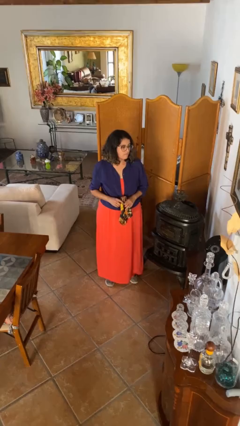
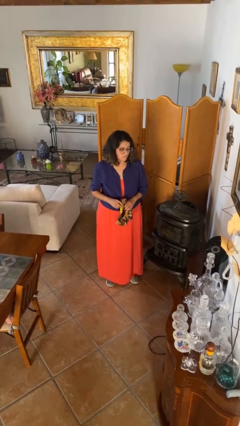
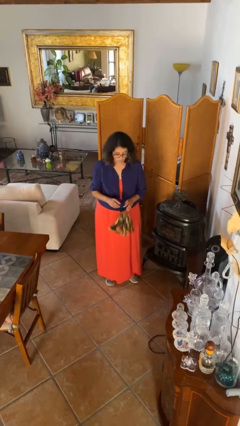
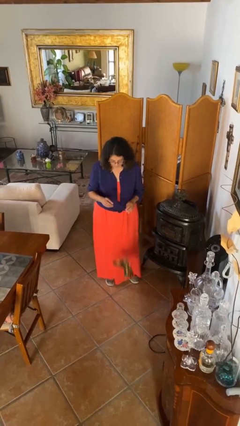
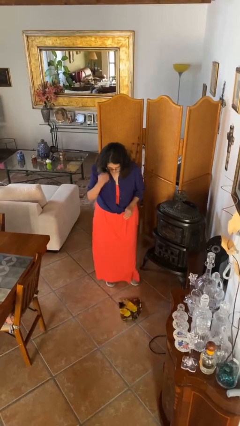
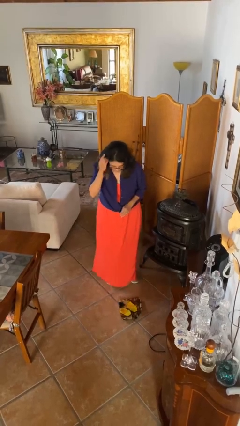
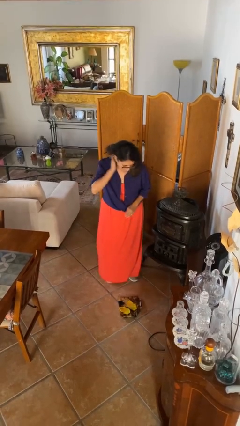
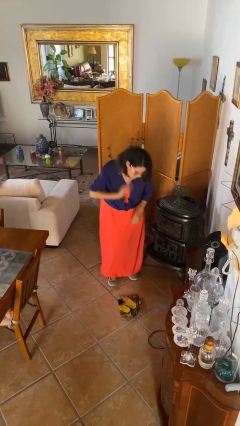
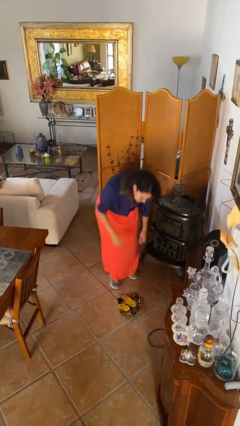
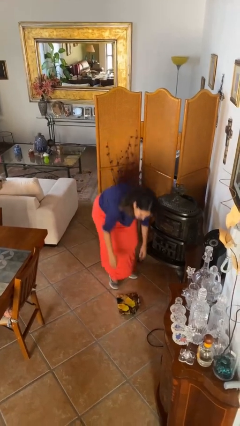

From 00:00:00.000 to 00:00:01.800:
person drops object

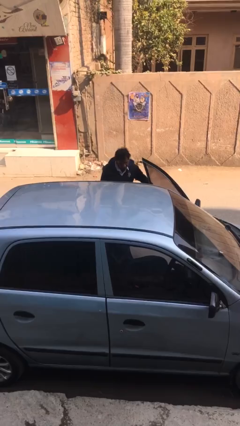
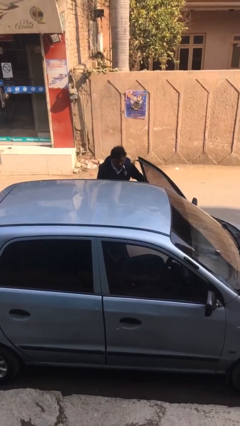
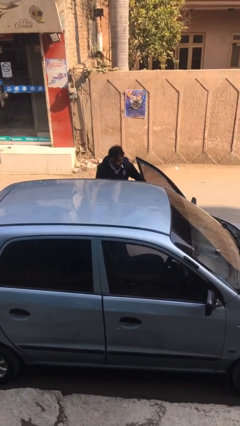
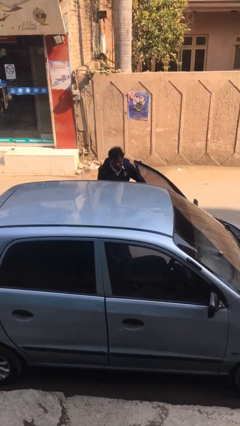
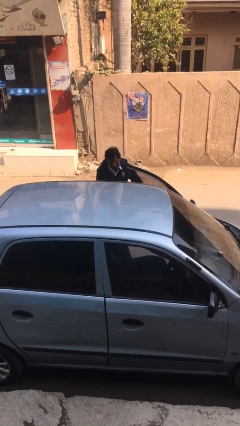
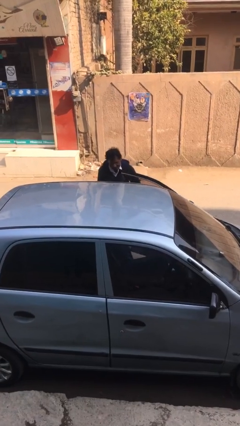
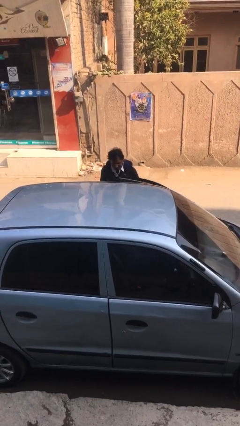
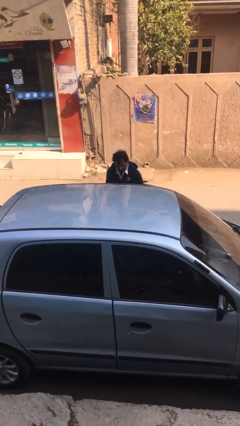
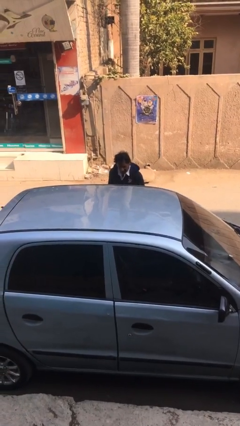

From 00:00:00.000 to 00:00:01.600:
person closes car door

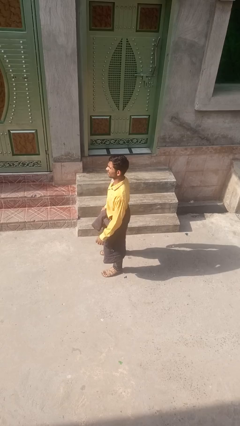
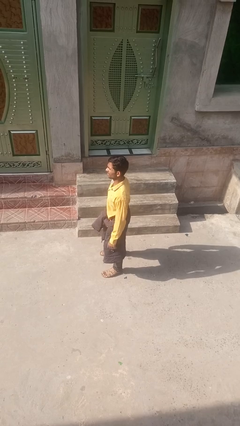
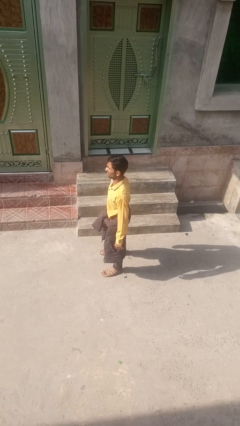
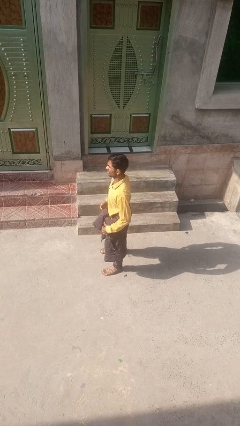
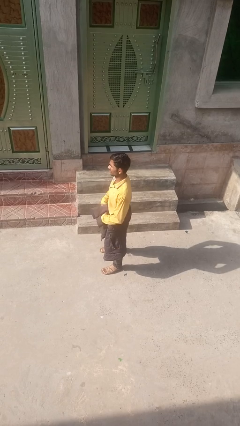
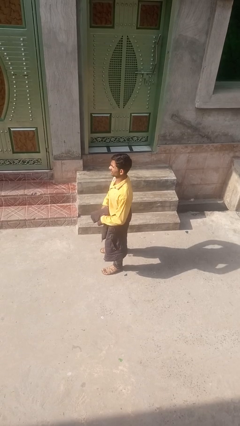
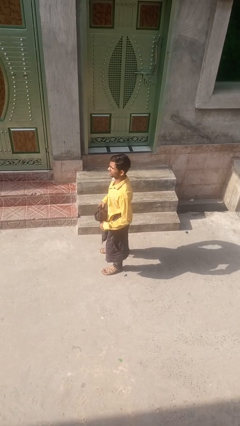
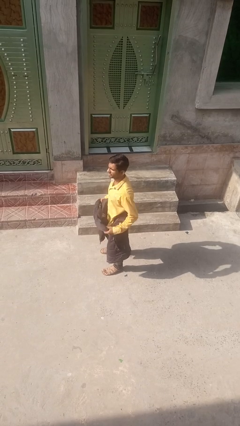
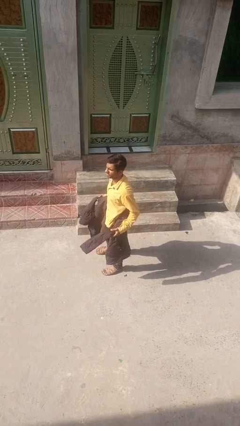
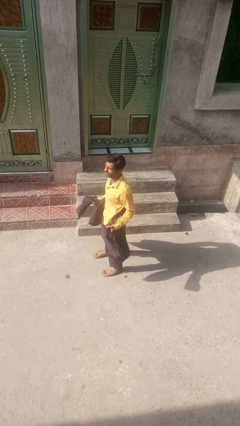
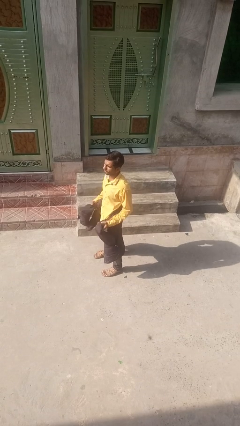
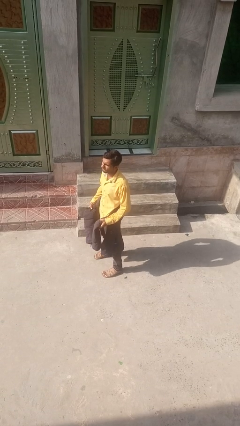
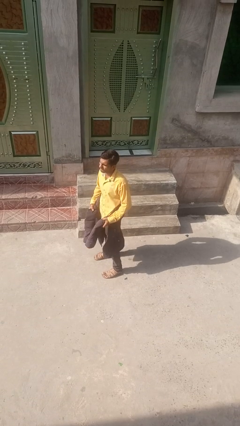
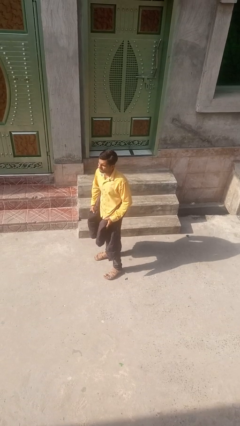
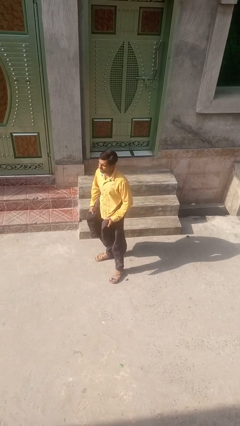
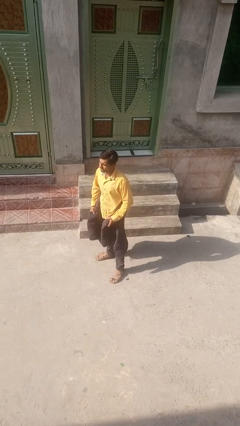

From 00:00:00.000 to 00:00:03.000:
person unties jacket around waist

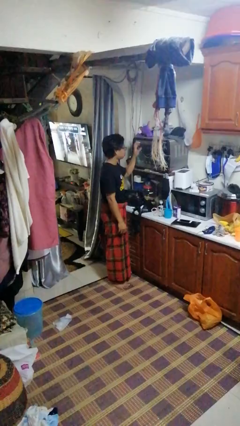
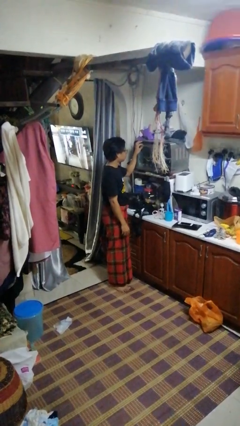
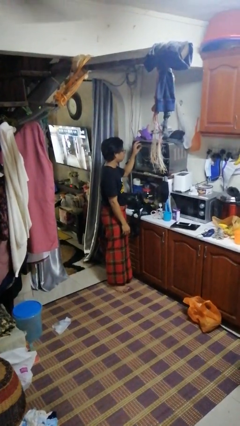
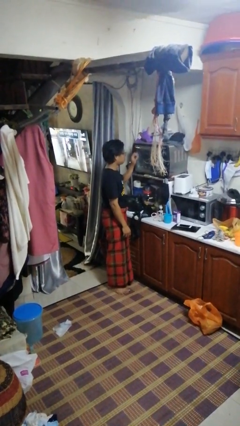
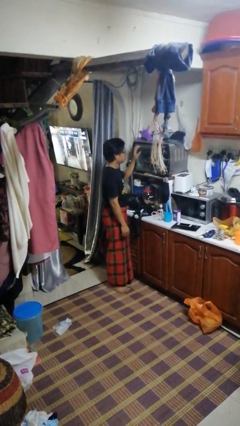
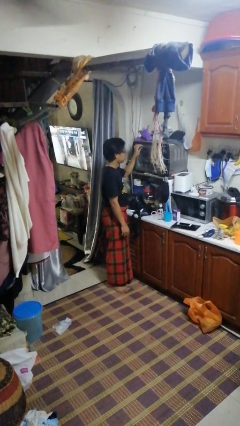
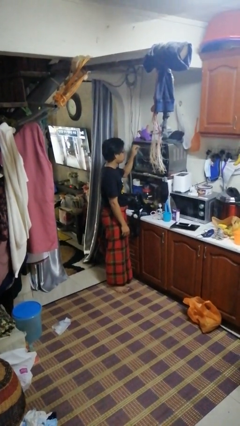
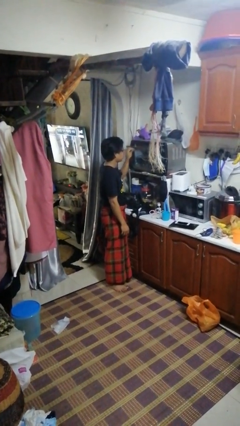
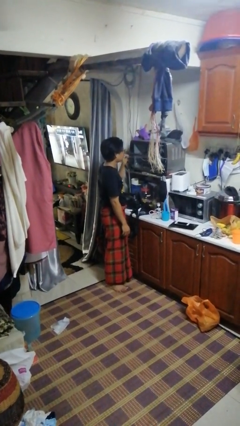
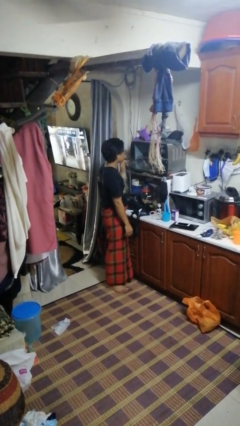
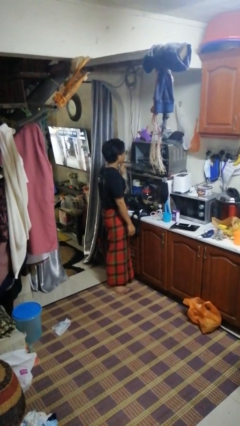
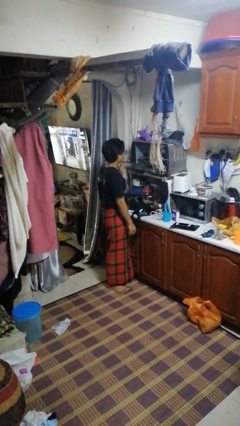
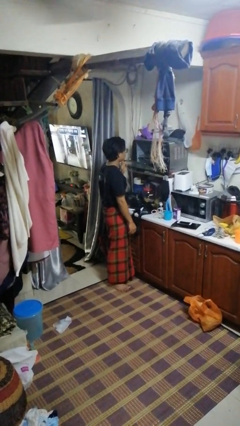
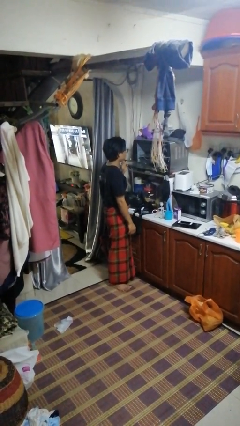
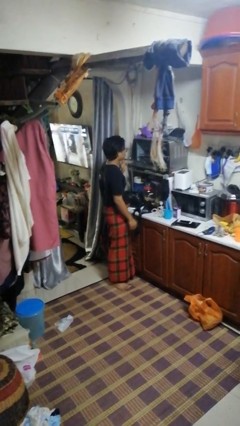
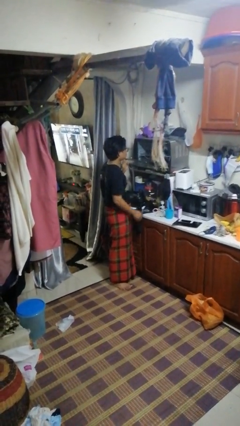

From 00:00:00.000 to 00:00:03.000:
person opens oven door

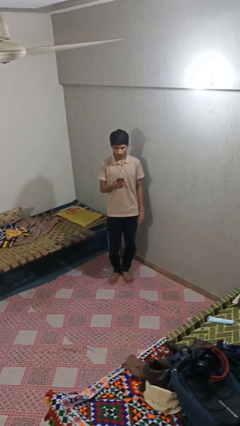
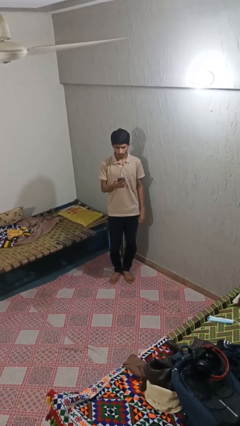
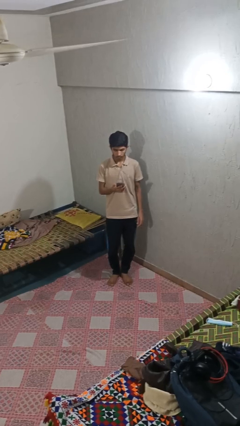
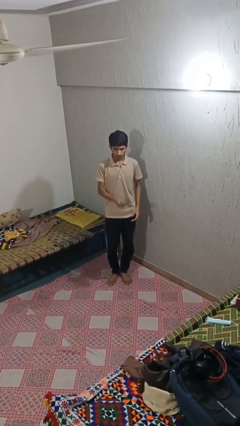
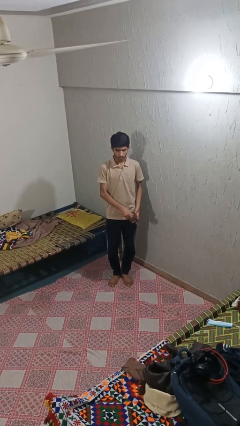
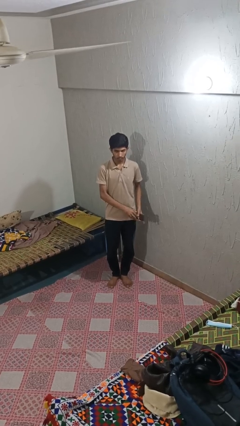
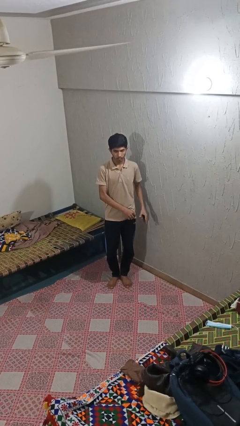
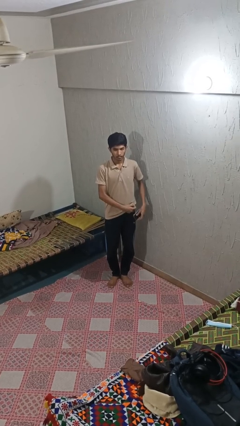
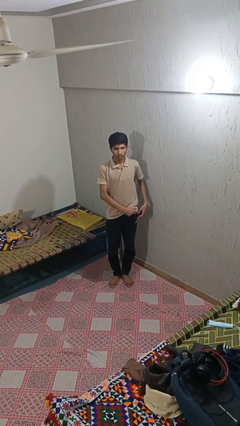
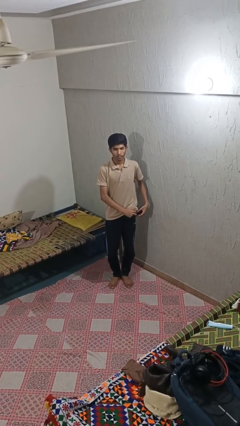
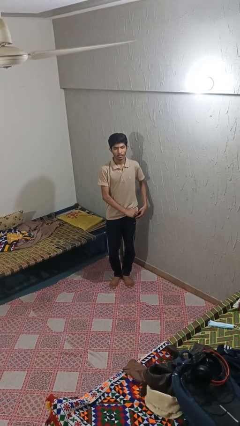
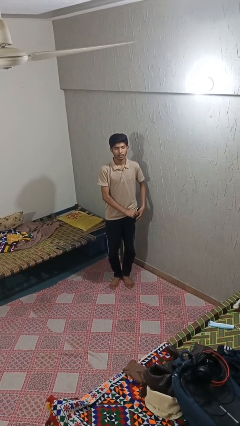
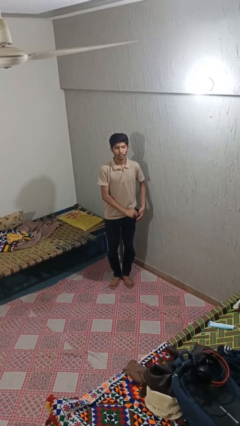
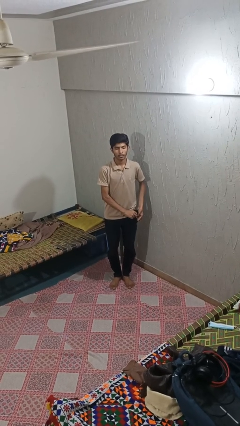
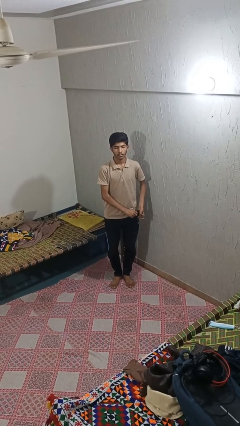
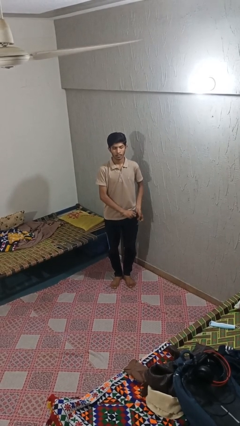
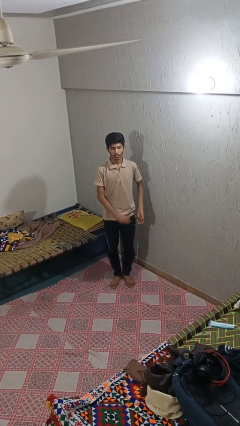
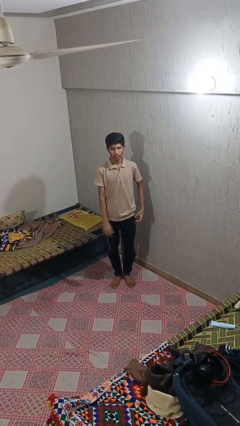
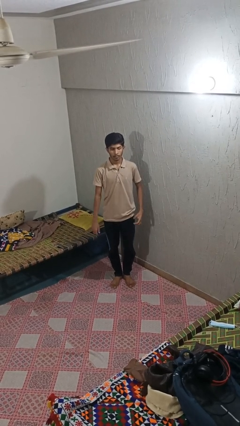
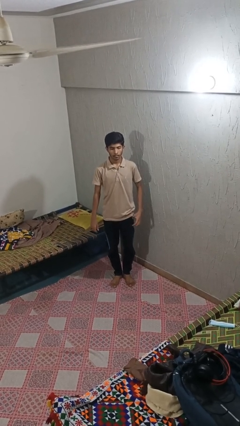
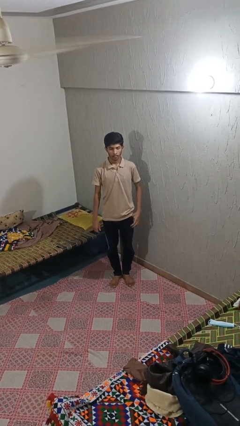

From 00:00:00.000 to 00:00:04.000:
person puts phone into pocket

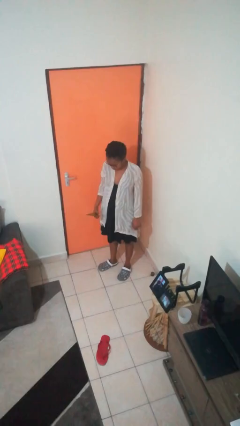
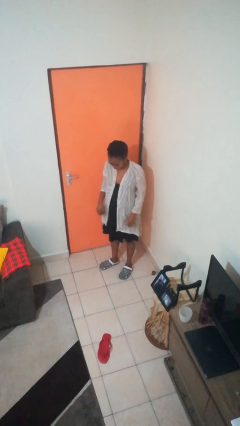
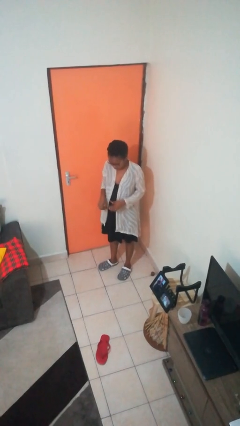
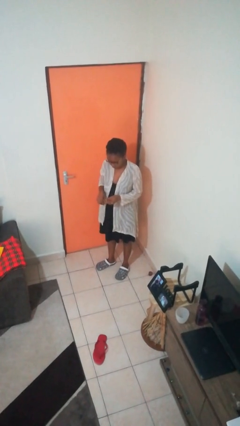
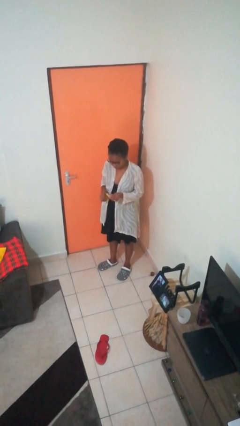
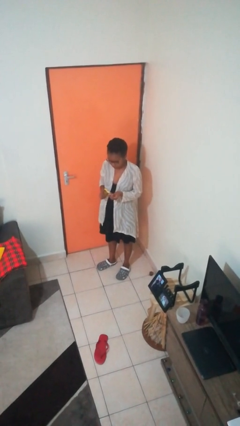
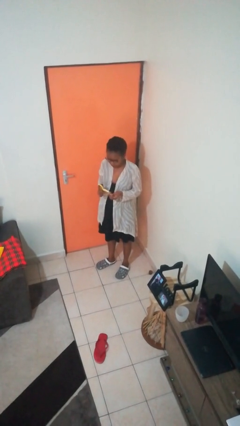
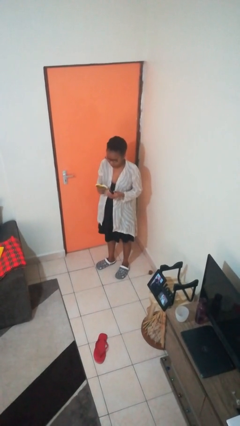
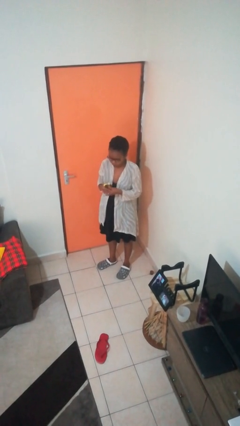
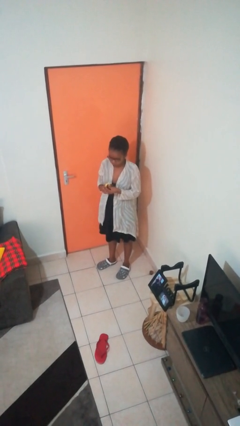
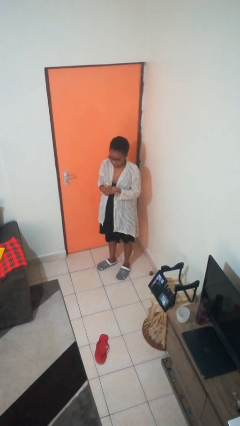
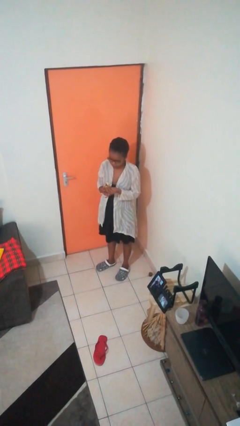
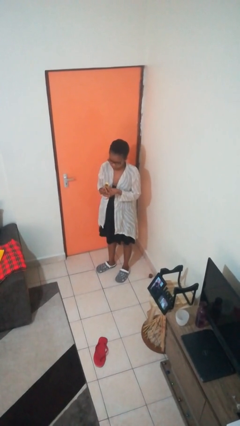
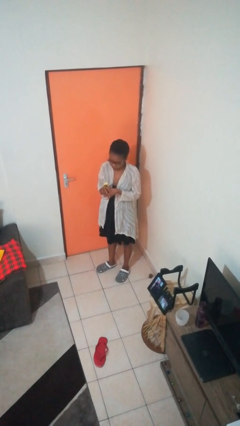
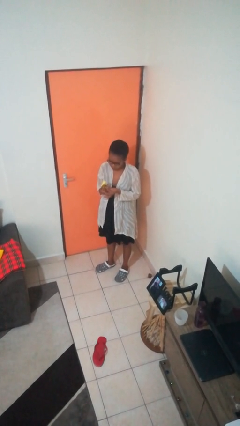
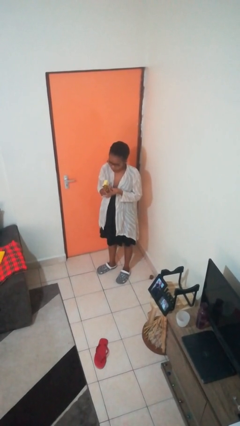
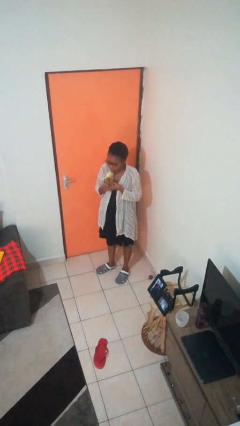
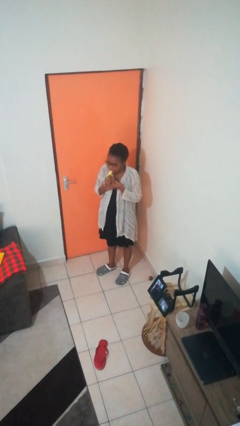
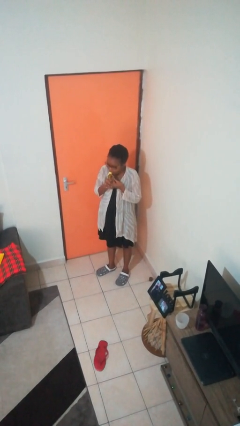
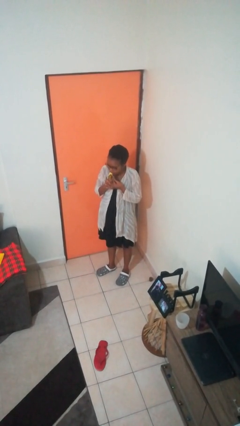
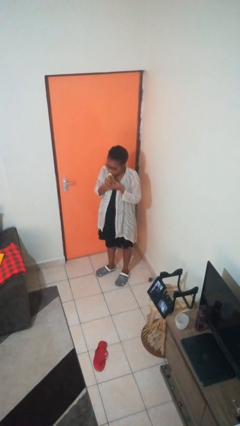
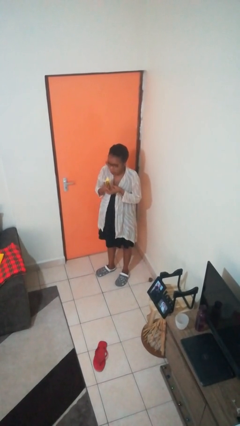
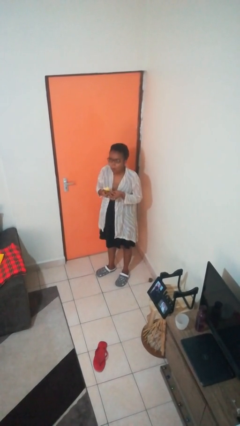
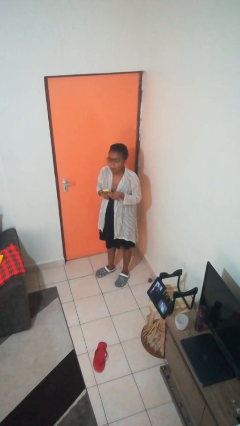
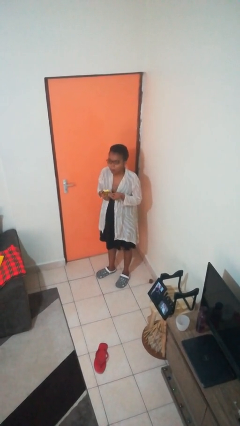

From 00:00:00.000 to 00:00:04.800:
person eats banana
